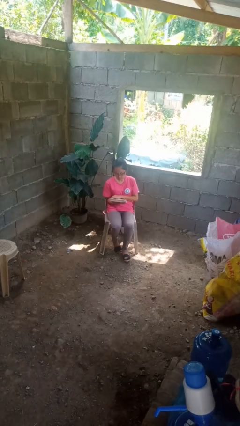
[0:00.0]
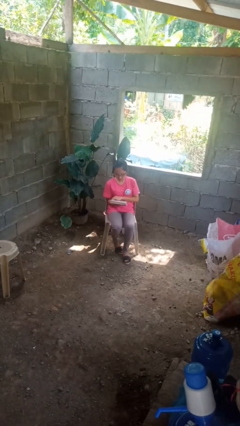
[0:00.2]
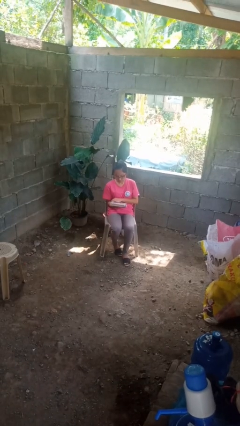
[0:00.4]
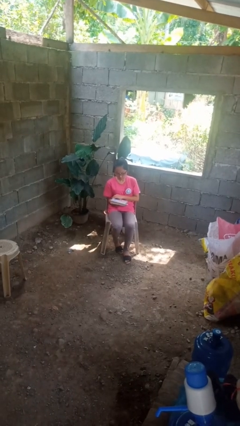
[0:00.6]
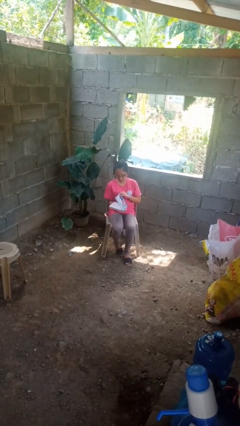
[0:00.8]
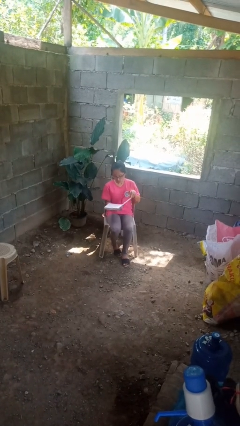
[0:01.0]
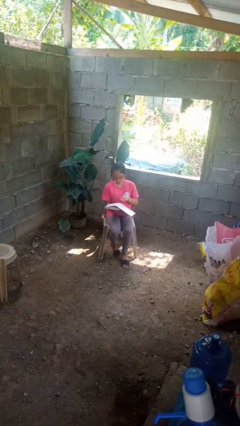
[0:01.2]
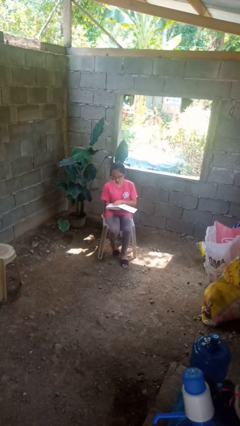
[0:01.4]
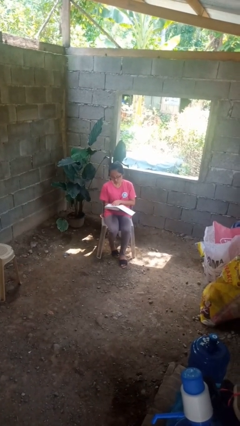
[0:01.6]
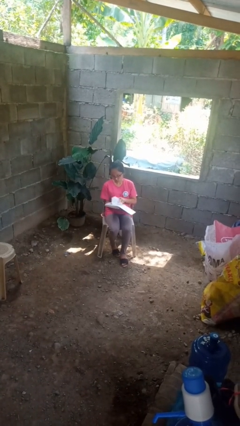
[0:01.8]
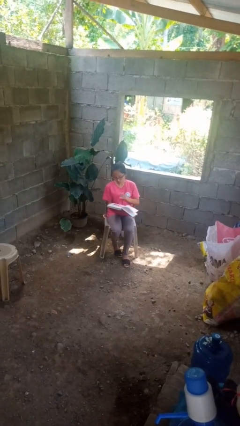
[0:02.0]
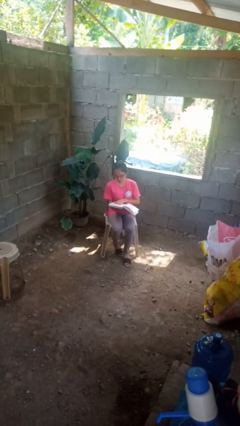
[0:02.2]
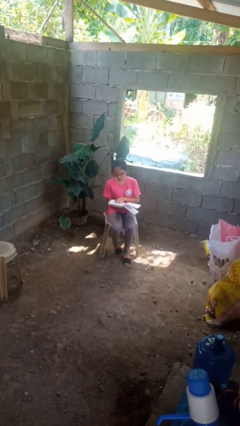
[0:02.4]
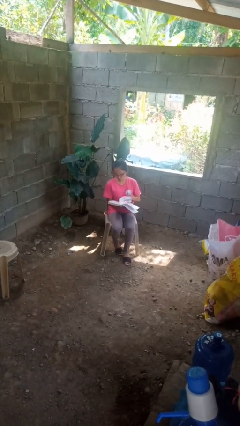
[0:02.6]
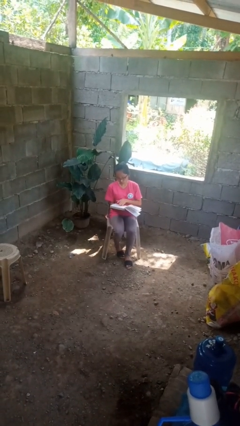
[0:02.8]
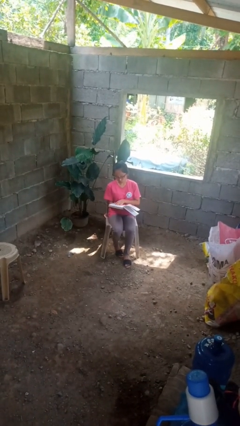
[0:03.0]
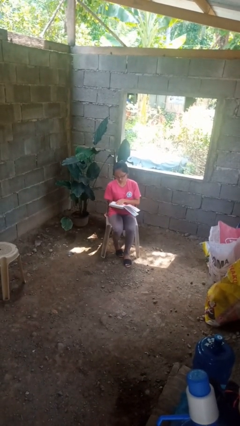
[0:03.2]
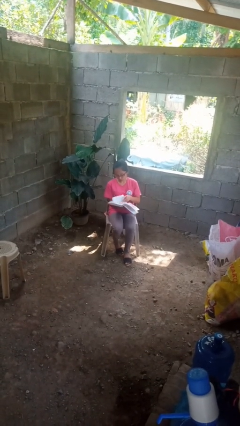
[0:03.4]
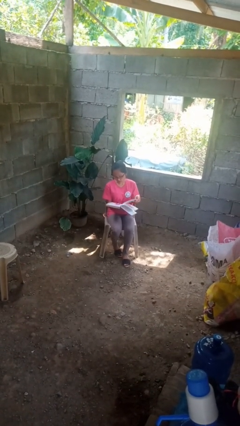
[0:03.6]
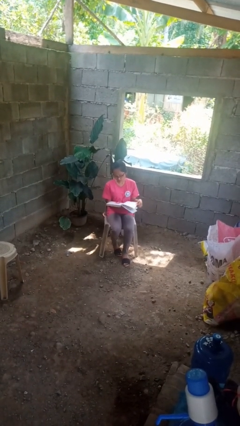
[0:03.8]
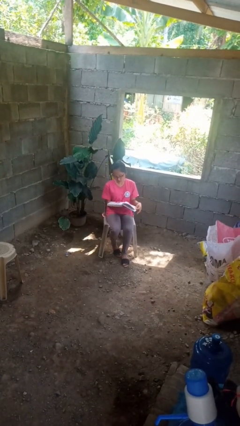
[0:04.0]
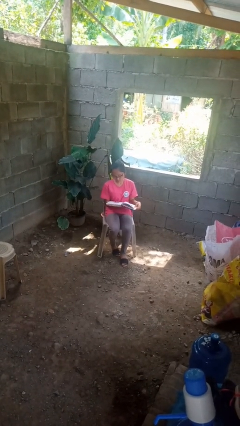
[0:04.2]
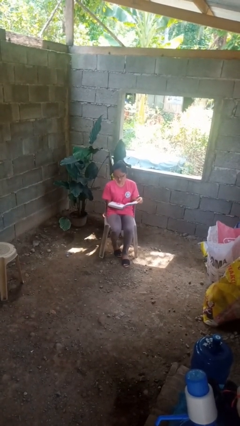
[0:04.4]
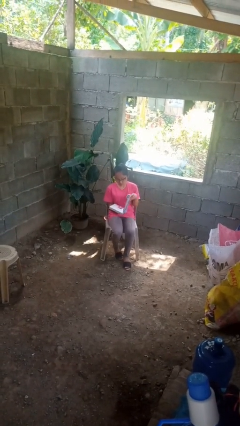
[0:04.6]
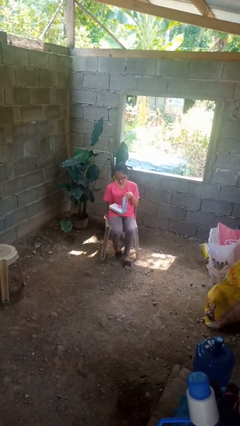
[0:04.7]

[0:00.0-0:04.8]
person reads book

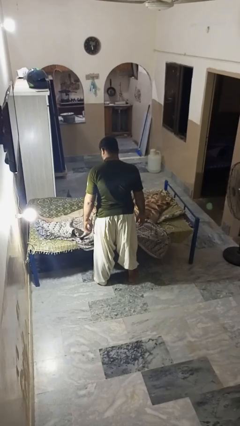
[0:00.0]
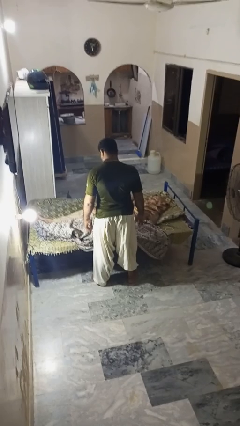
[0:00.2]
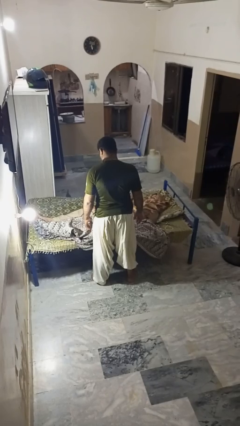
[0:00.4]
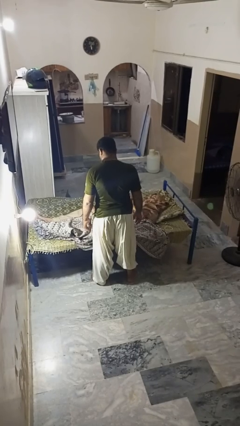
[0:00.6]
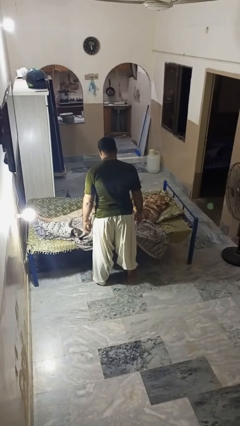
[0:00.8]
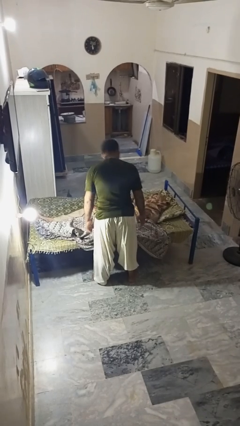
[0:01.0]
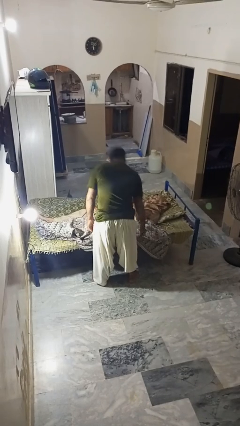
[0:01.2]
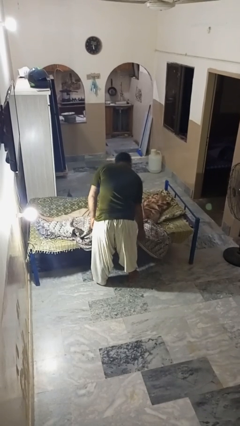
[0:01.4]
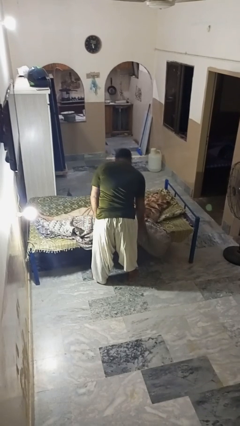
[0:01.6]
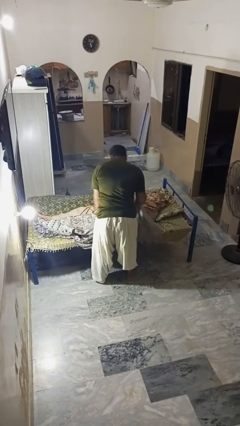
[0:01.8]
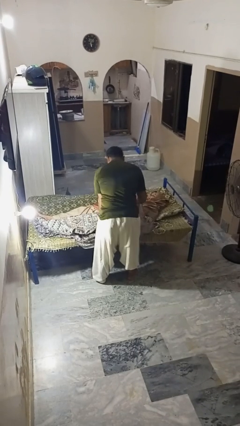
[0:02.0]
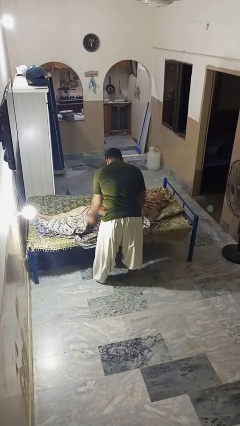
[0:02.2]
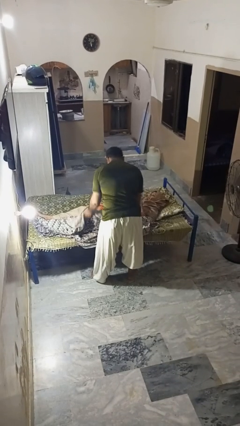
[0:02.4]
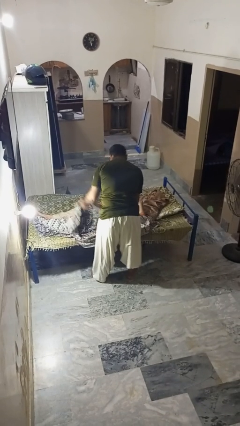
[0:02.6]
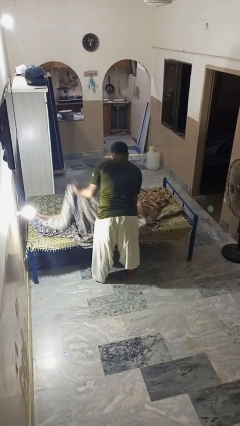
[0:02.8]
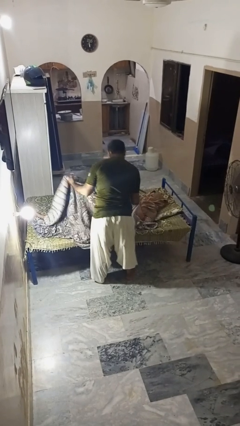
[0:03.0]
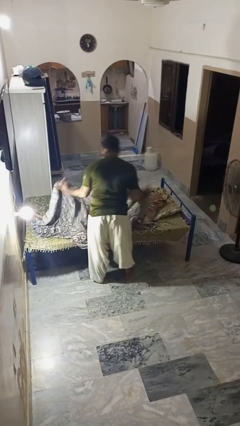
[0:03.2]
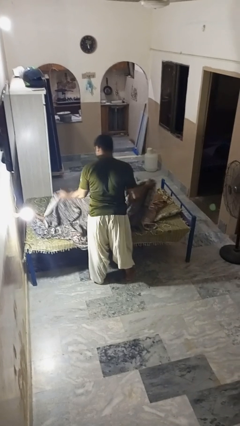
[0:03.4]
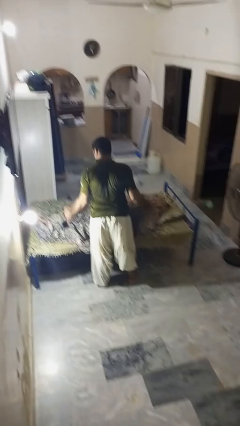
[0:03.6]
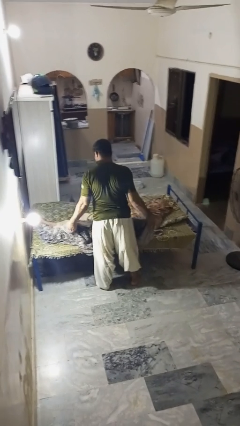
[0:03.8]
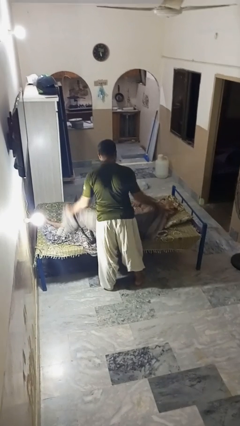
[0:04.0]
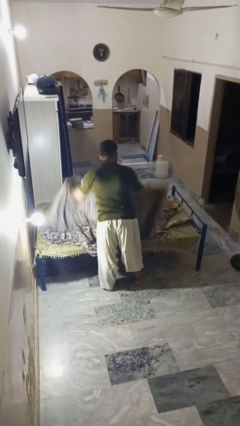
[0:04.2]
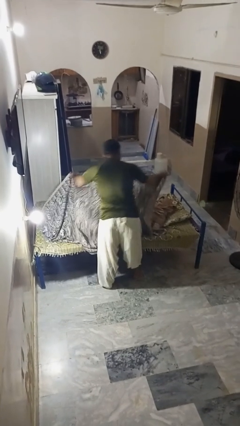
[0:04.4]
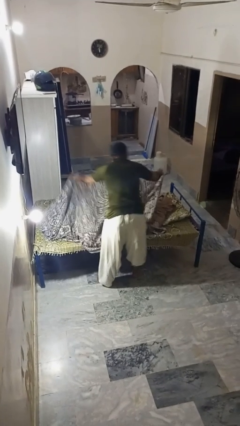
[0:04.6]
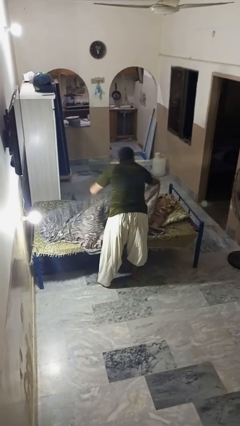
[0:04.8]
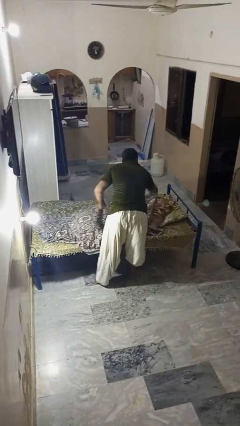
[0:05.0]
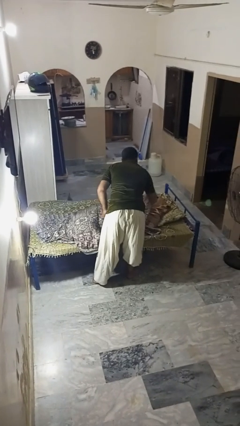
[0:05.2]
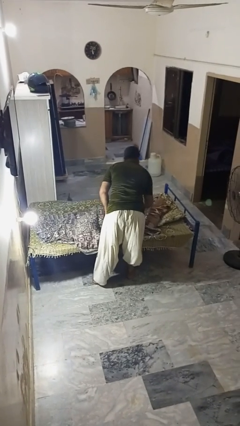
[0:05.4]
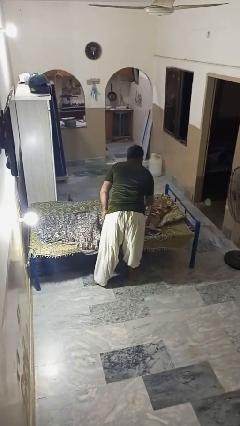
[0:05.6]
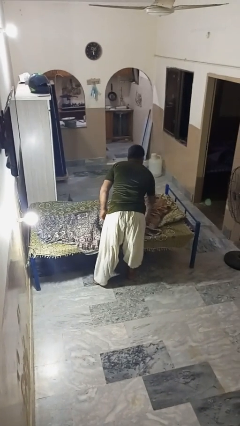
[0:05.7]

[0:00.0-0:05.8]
person covers friend with blanket

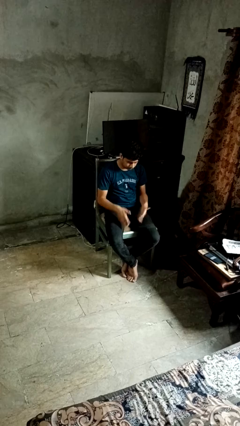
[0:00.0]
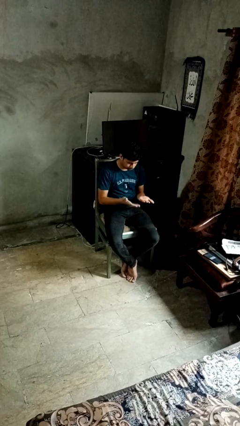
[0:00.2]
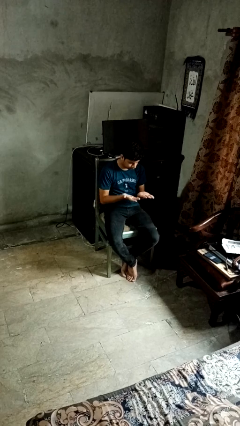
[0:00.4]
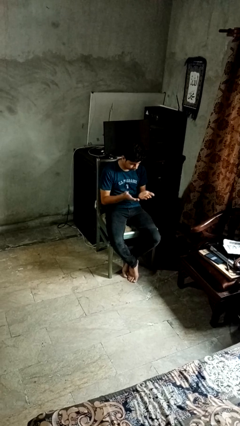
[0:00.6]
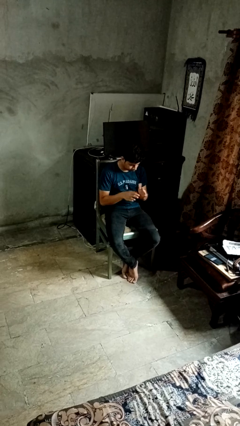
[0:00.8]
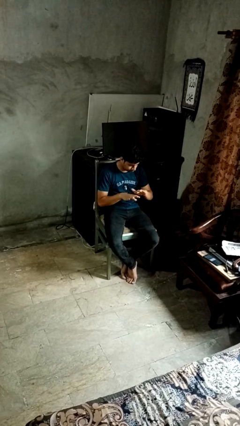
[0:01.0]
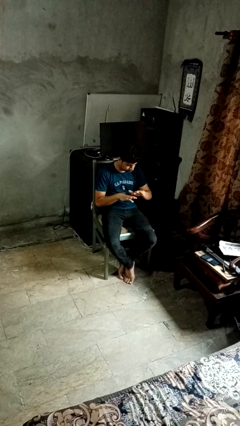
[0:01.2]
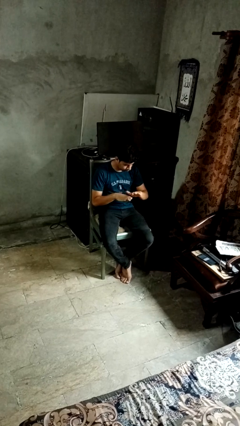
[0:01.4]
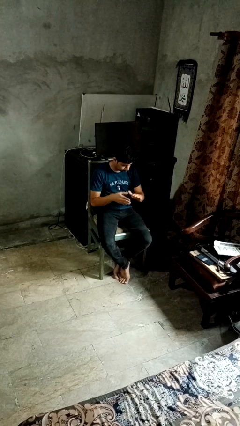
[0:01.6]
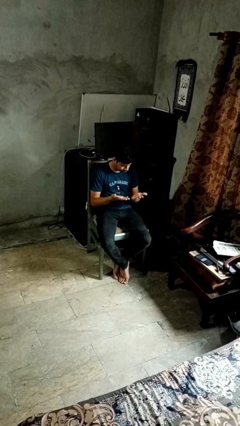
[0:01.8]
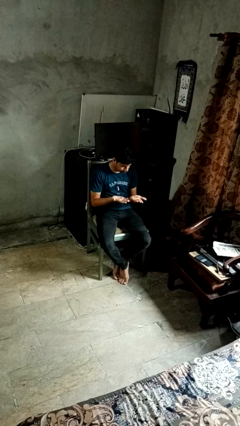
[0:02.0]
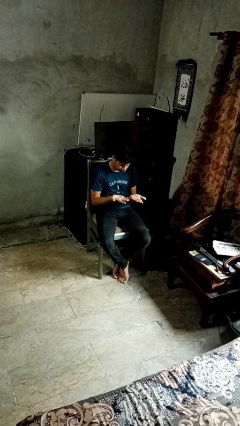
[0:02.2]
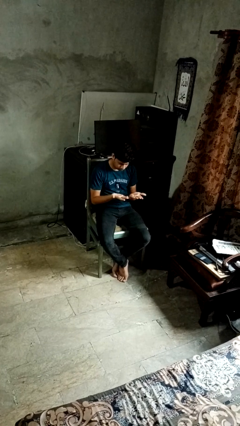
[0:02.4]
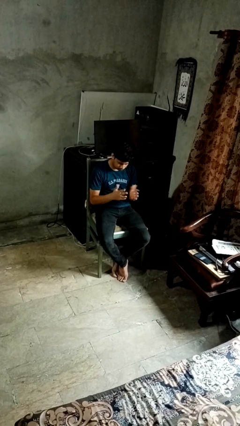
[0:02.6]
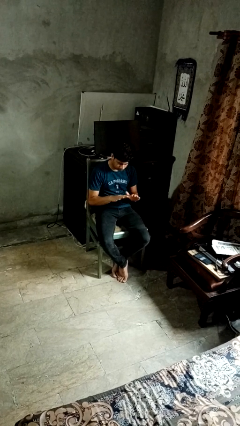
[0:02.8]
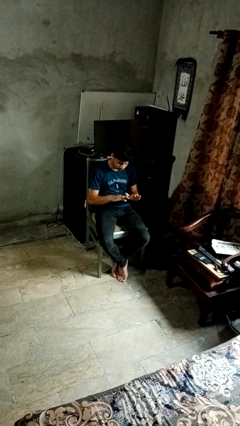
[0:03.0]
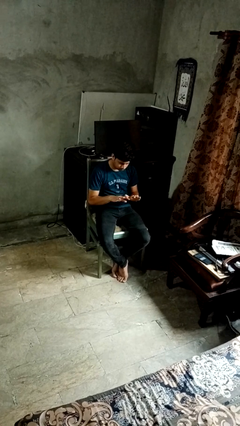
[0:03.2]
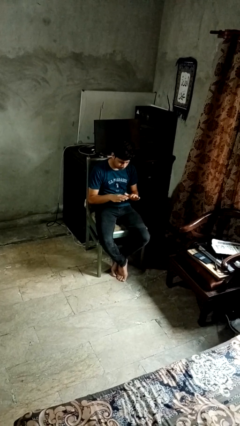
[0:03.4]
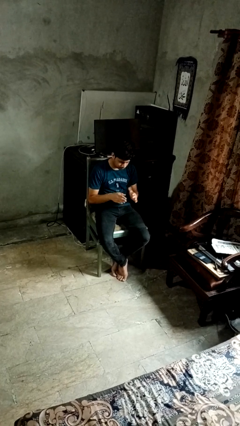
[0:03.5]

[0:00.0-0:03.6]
person looks at hands in lap

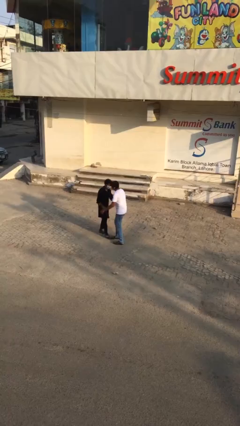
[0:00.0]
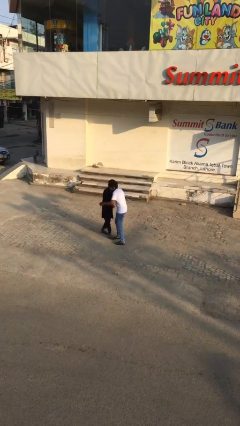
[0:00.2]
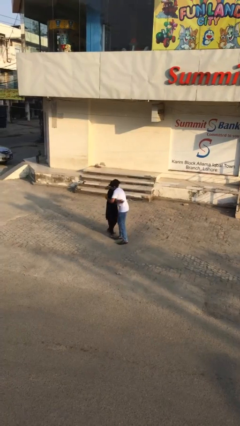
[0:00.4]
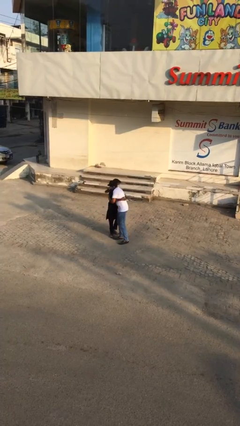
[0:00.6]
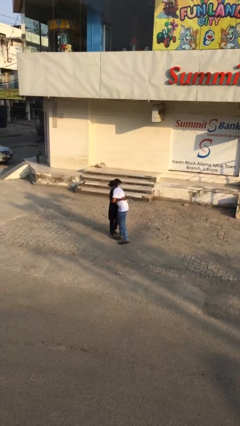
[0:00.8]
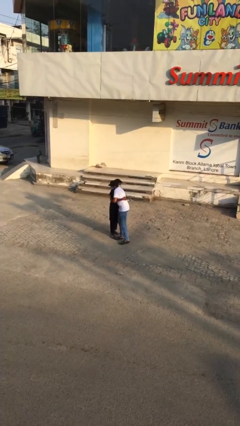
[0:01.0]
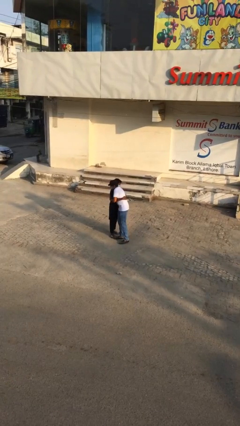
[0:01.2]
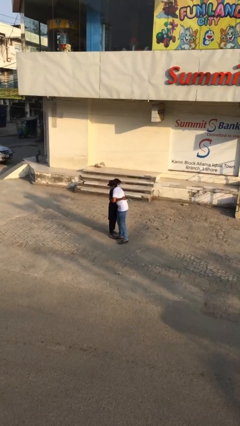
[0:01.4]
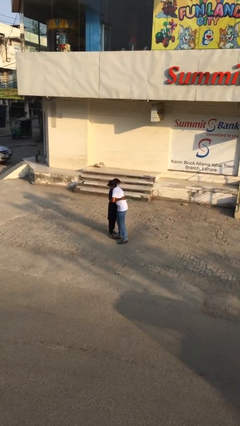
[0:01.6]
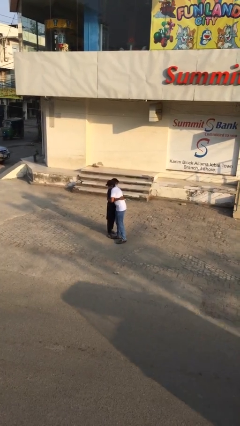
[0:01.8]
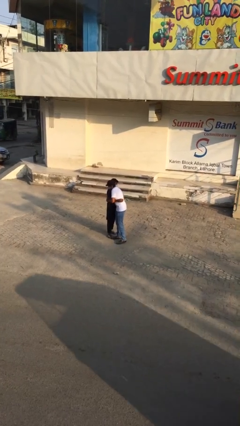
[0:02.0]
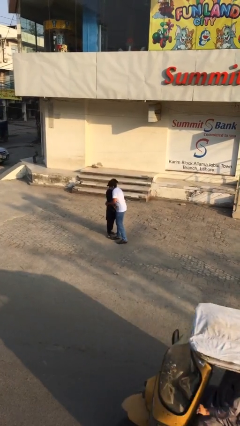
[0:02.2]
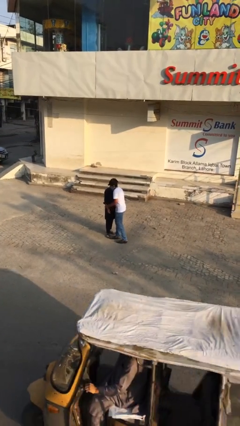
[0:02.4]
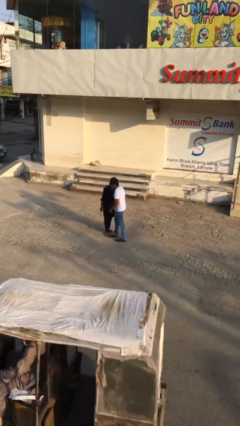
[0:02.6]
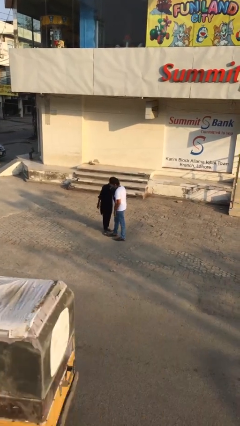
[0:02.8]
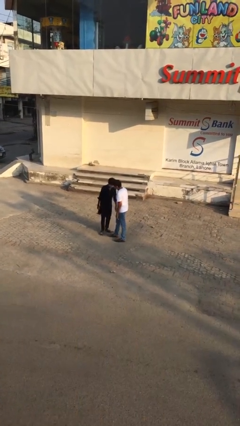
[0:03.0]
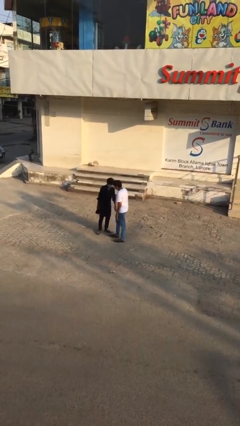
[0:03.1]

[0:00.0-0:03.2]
person embraces person

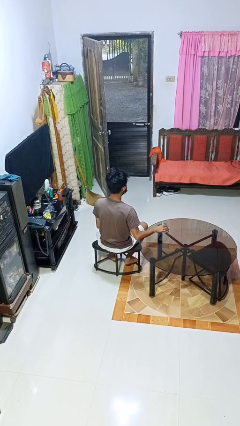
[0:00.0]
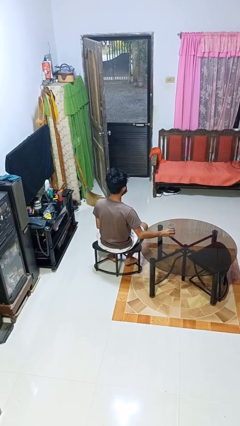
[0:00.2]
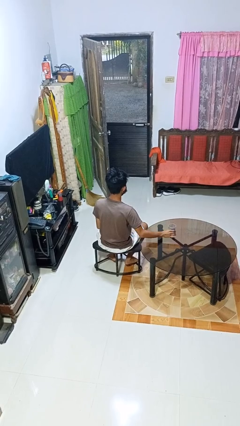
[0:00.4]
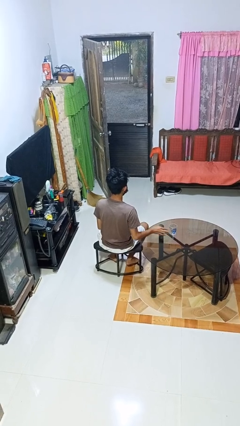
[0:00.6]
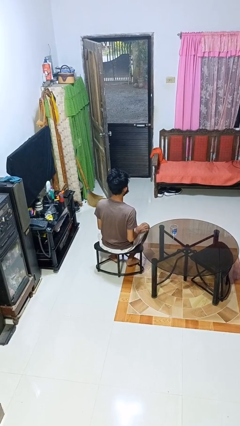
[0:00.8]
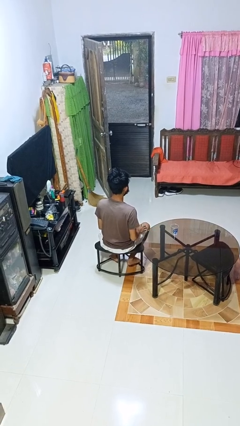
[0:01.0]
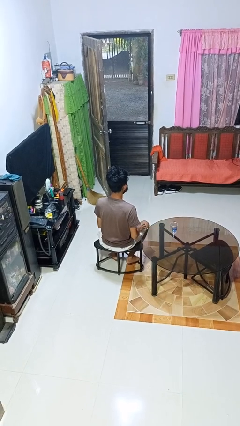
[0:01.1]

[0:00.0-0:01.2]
person sets upright glass
